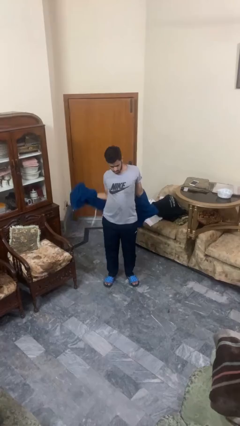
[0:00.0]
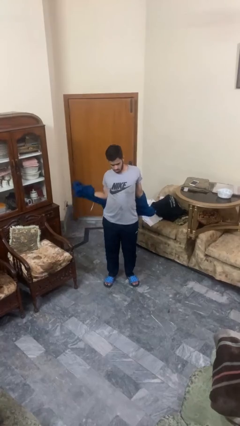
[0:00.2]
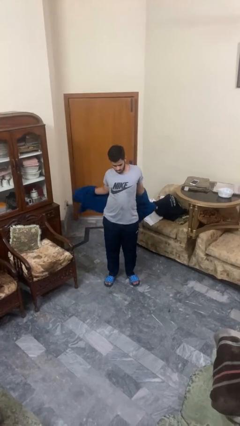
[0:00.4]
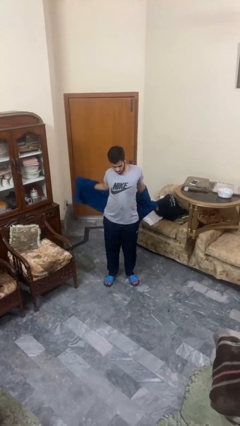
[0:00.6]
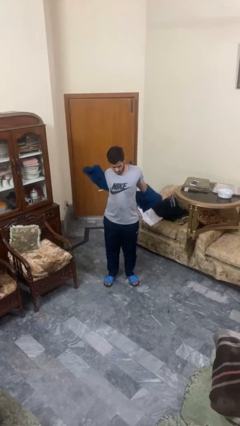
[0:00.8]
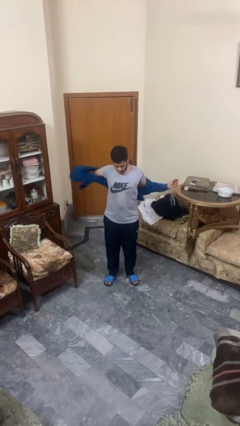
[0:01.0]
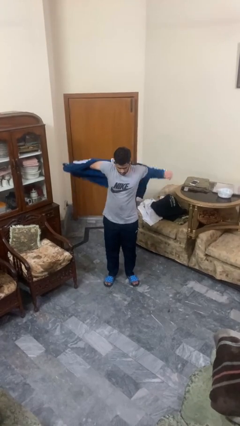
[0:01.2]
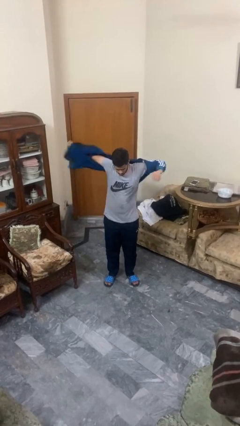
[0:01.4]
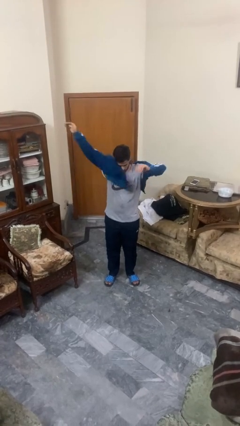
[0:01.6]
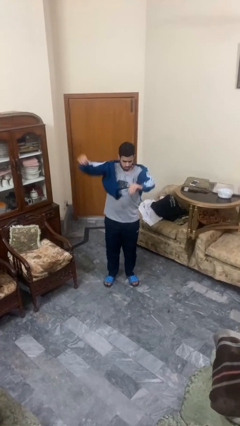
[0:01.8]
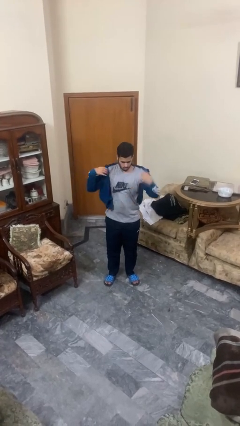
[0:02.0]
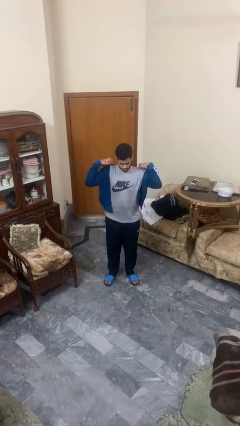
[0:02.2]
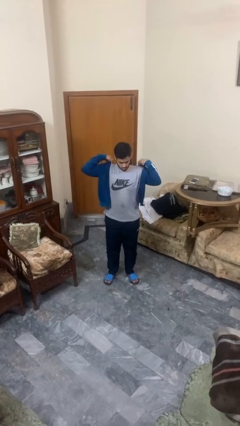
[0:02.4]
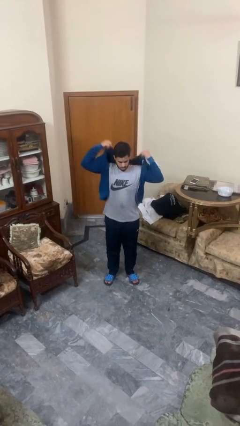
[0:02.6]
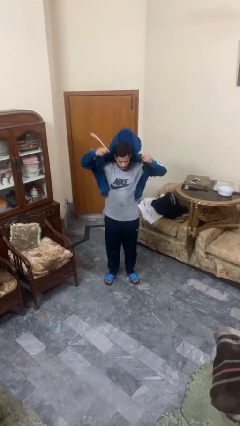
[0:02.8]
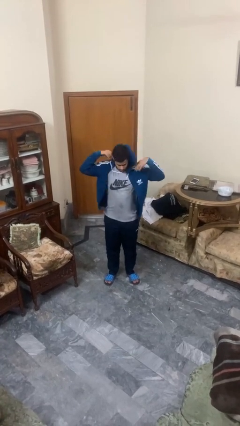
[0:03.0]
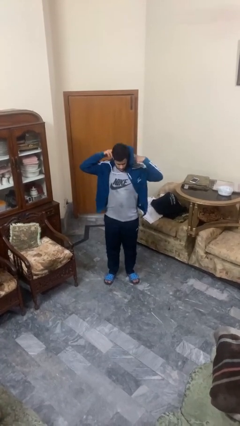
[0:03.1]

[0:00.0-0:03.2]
person puts on hoodie

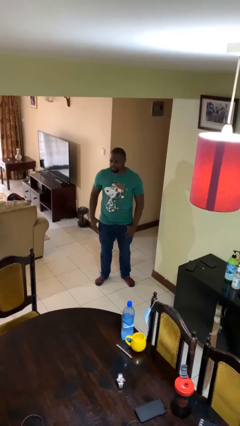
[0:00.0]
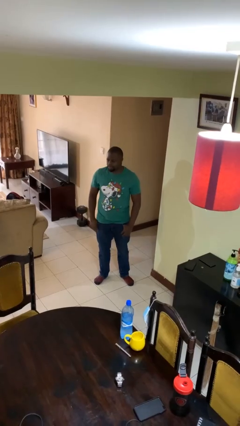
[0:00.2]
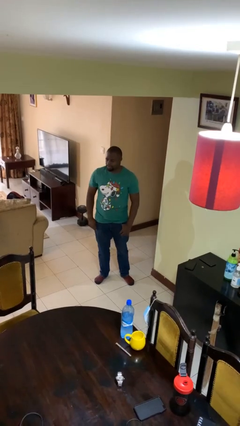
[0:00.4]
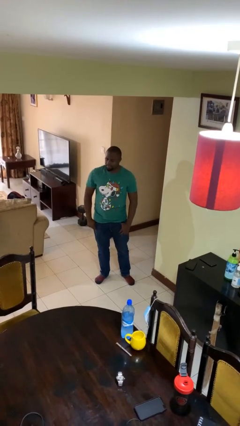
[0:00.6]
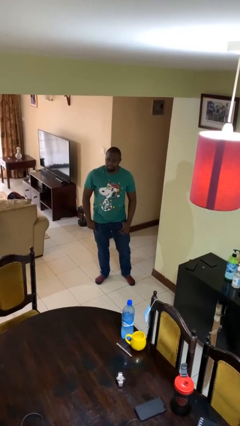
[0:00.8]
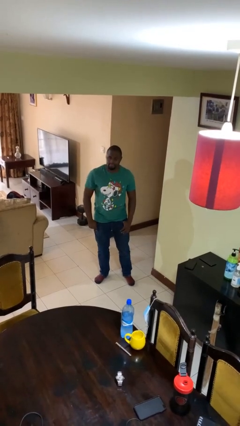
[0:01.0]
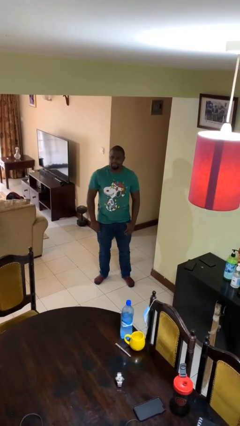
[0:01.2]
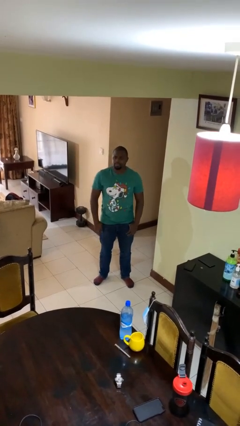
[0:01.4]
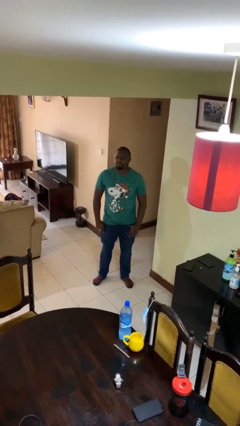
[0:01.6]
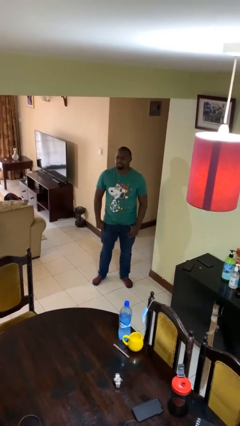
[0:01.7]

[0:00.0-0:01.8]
person snaps fingers

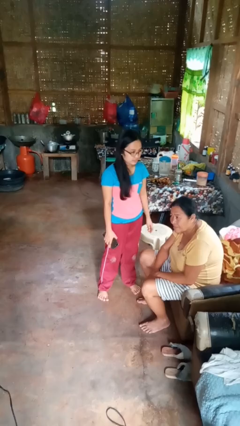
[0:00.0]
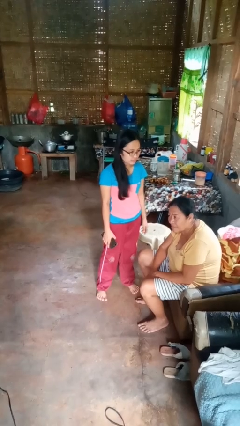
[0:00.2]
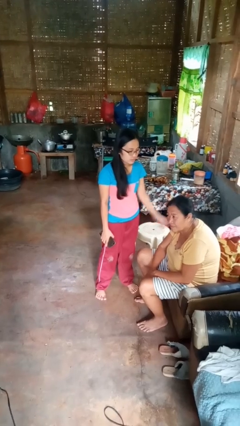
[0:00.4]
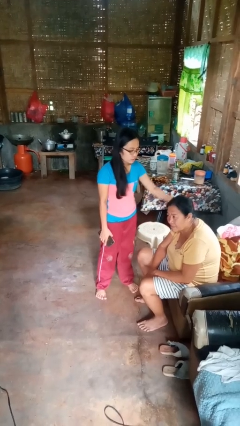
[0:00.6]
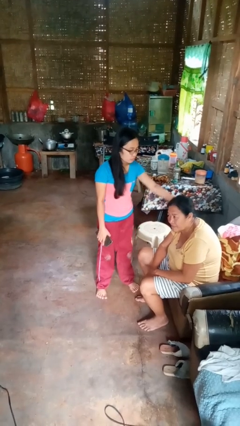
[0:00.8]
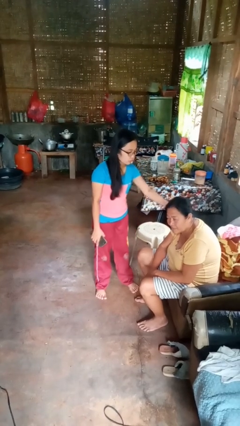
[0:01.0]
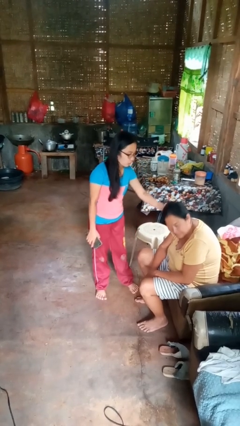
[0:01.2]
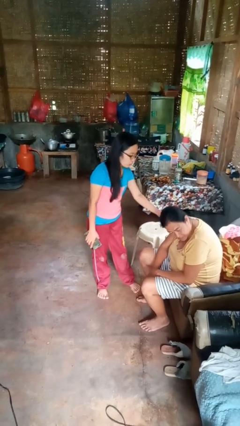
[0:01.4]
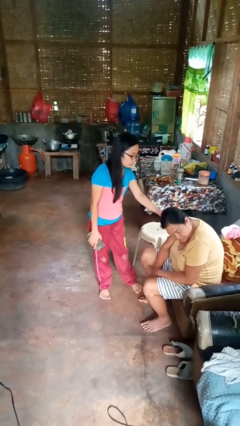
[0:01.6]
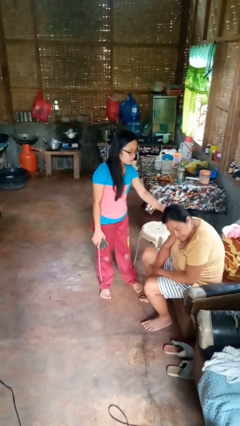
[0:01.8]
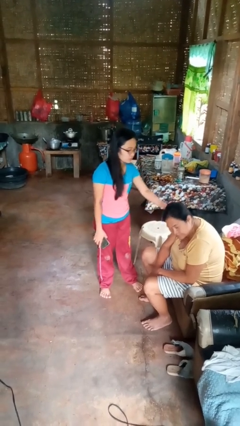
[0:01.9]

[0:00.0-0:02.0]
person grabs person by hair

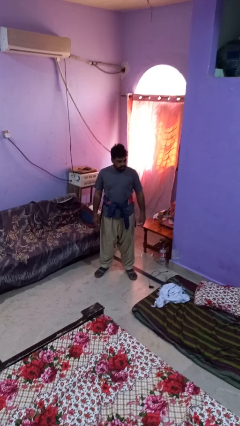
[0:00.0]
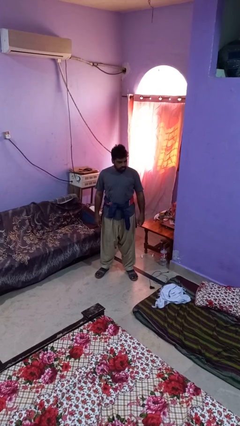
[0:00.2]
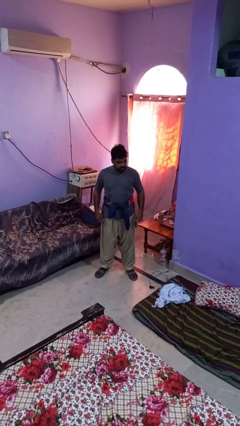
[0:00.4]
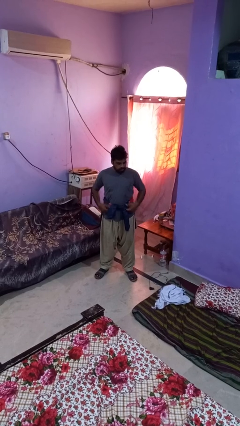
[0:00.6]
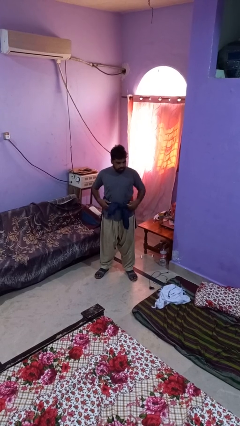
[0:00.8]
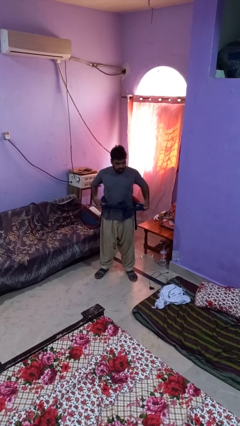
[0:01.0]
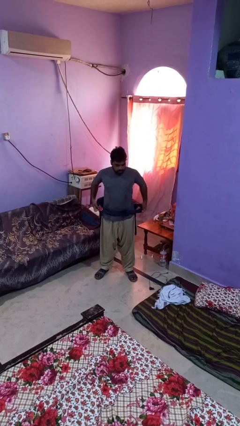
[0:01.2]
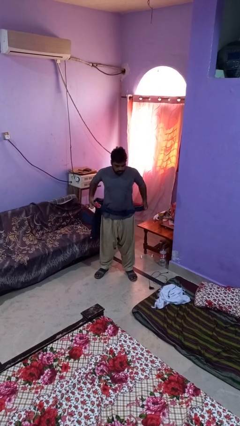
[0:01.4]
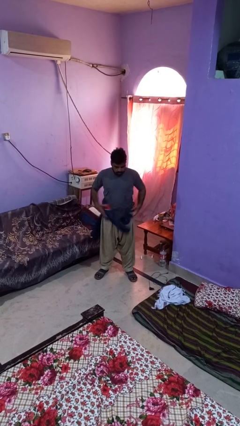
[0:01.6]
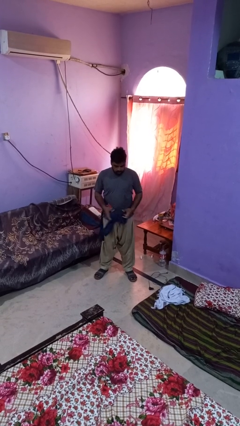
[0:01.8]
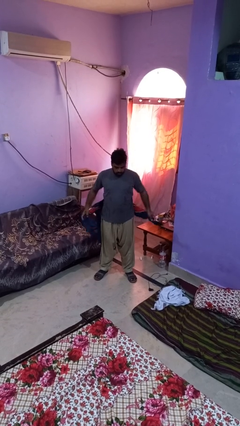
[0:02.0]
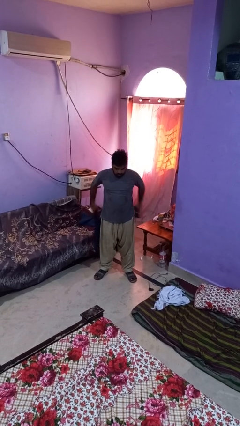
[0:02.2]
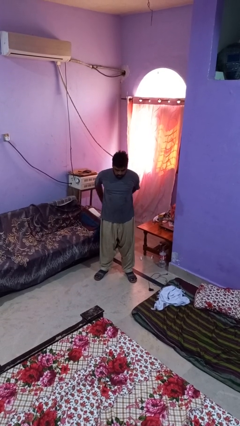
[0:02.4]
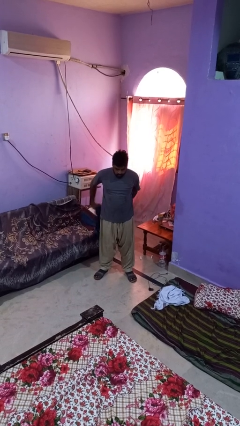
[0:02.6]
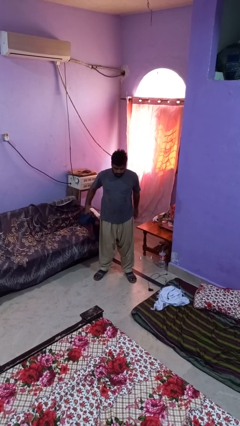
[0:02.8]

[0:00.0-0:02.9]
person unties jacket around waist

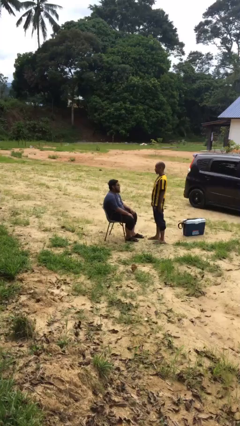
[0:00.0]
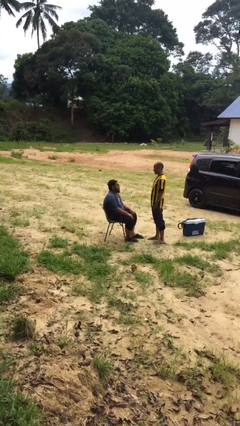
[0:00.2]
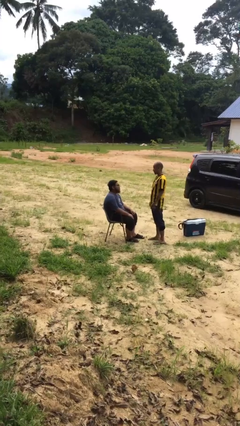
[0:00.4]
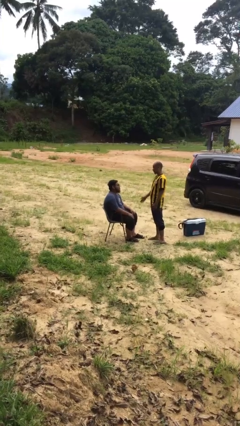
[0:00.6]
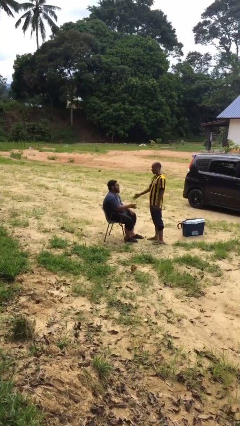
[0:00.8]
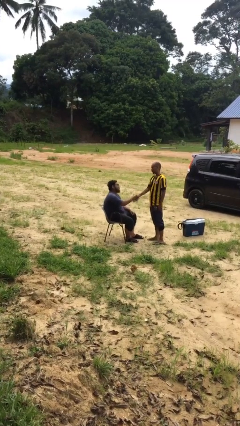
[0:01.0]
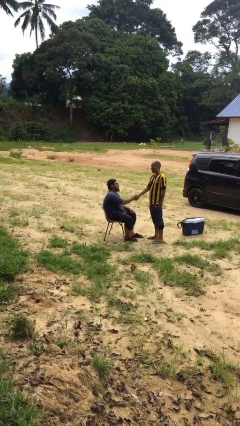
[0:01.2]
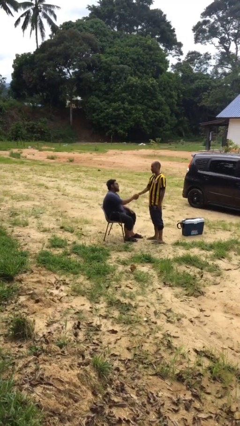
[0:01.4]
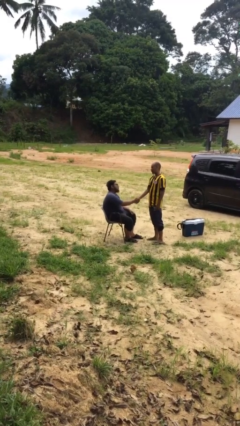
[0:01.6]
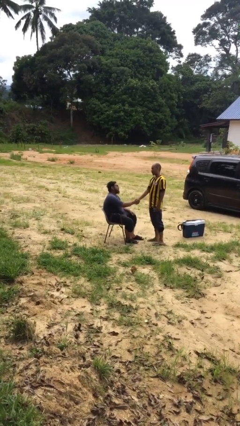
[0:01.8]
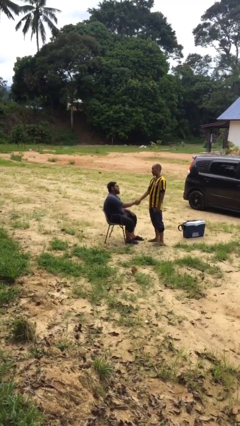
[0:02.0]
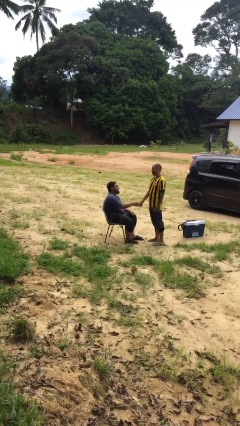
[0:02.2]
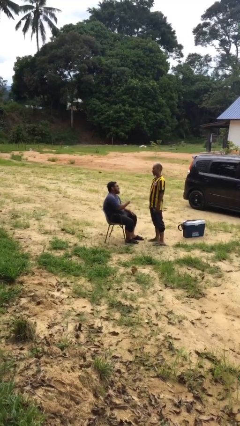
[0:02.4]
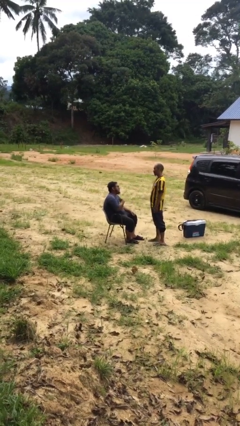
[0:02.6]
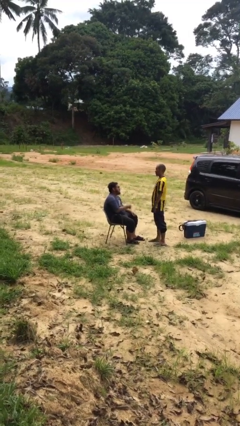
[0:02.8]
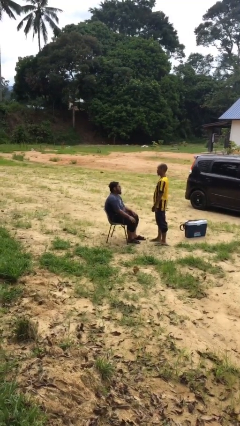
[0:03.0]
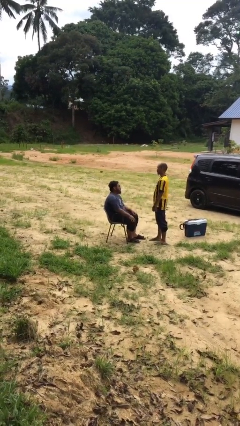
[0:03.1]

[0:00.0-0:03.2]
person shakes hand

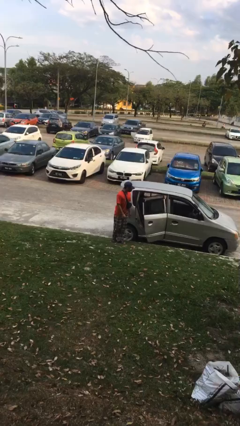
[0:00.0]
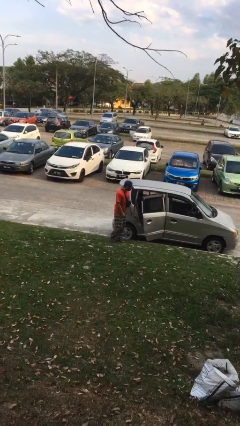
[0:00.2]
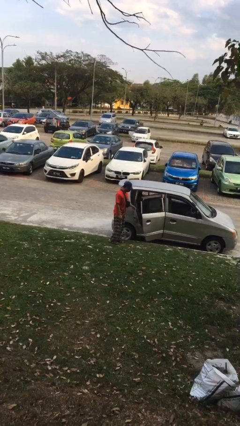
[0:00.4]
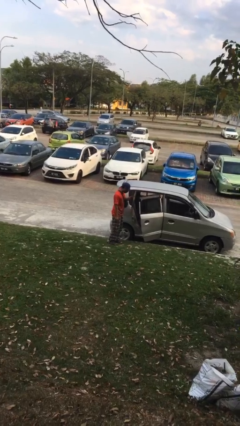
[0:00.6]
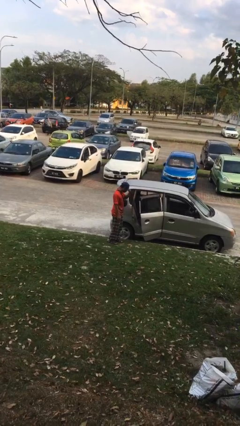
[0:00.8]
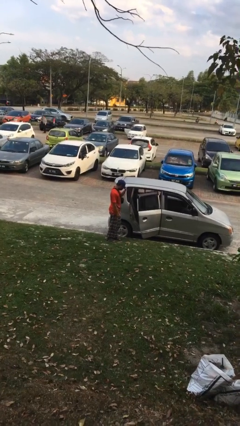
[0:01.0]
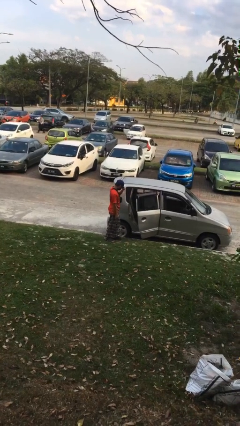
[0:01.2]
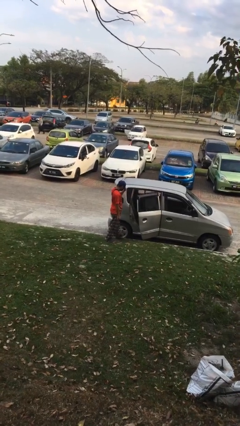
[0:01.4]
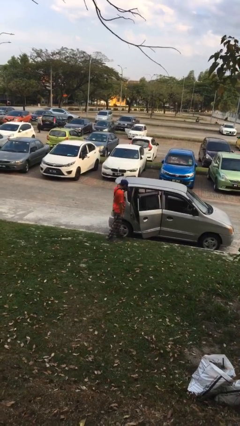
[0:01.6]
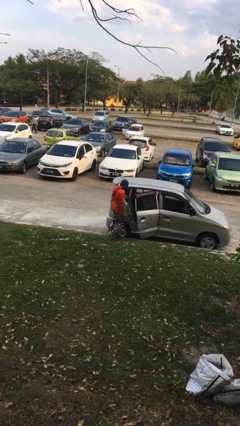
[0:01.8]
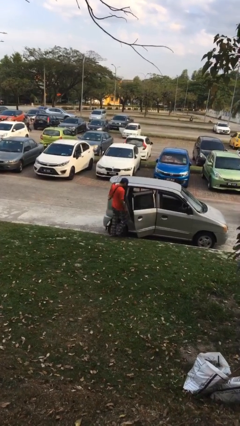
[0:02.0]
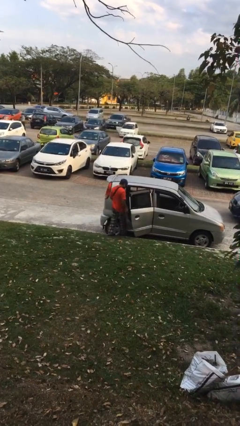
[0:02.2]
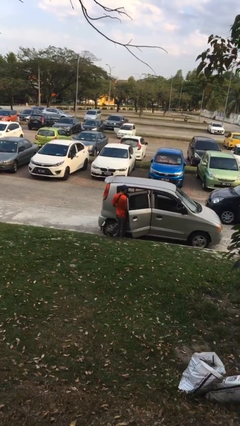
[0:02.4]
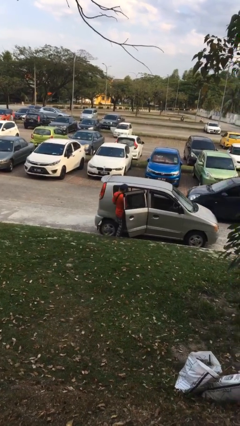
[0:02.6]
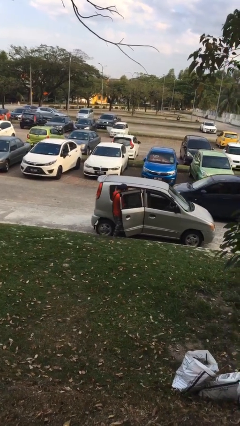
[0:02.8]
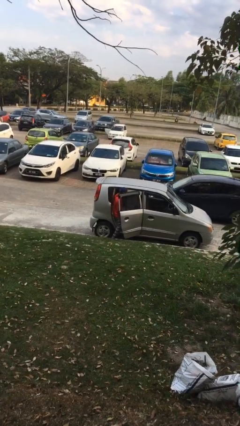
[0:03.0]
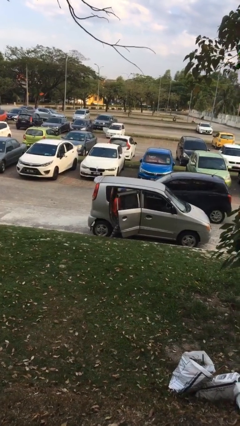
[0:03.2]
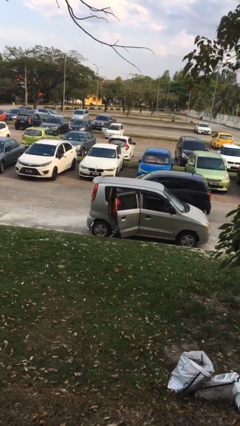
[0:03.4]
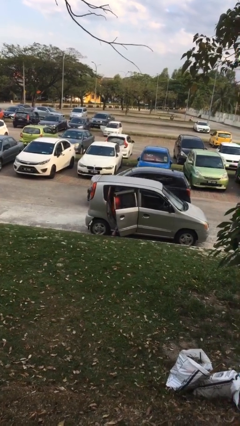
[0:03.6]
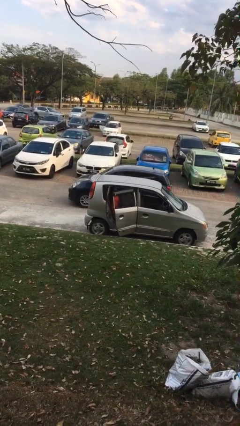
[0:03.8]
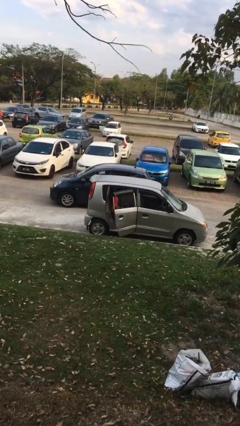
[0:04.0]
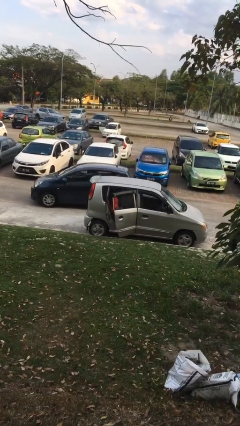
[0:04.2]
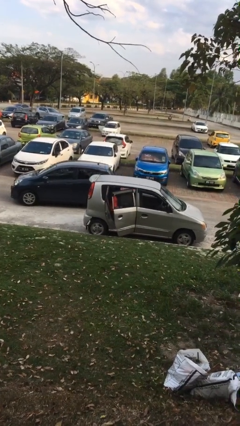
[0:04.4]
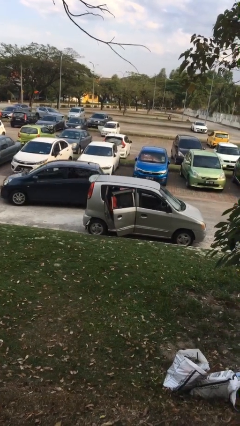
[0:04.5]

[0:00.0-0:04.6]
person enters car
